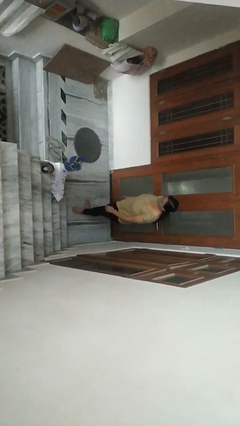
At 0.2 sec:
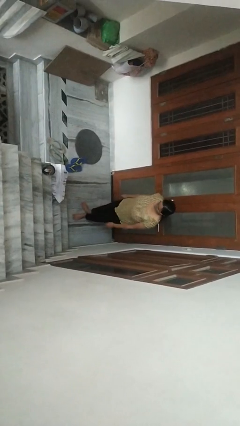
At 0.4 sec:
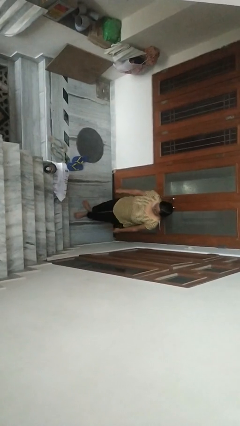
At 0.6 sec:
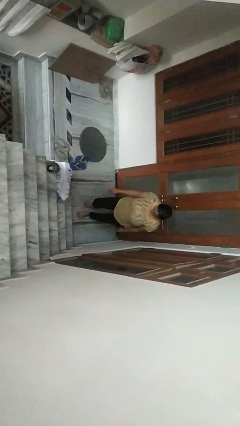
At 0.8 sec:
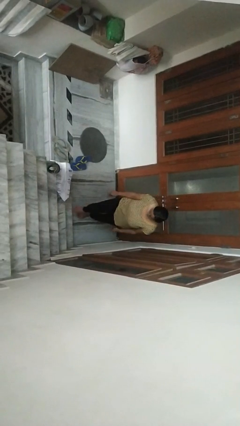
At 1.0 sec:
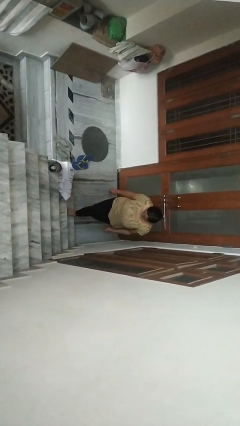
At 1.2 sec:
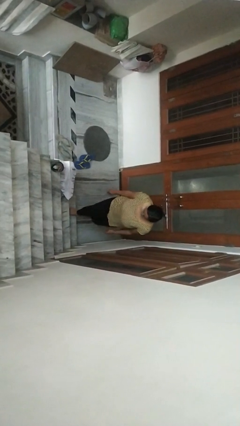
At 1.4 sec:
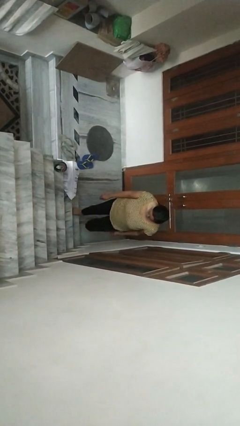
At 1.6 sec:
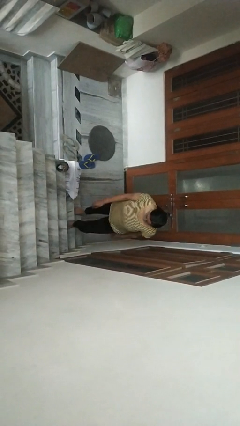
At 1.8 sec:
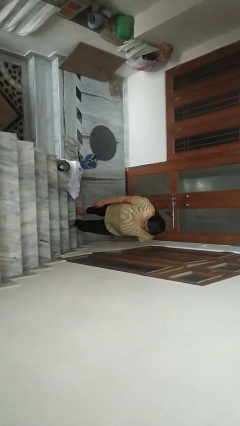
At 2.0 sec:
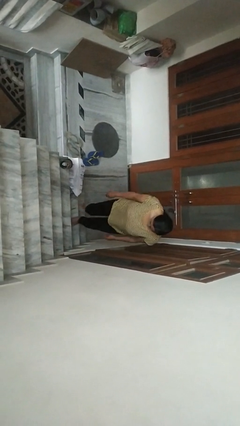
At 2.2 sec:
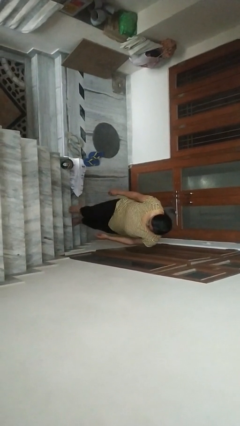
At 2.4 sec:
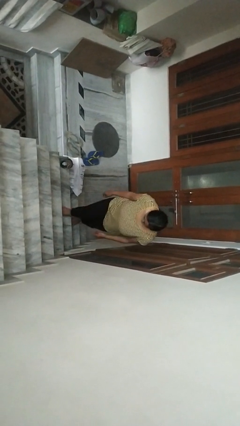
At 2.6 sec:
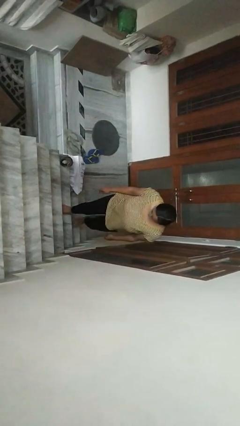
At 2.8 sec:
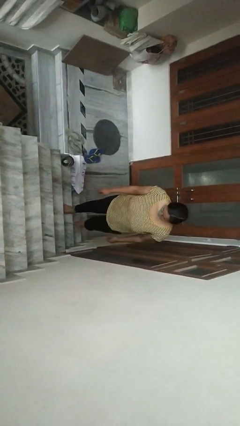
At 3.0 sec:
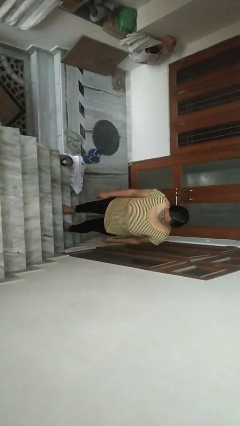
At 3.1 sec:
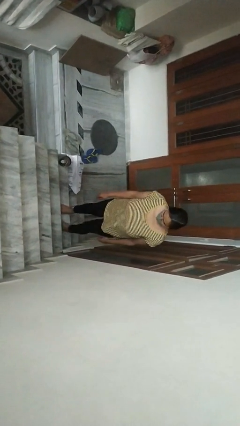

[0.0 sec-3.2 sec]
person climbs up stairs

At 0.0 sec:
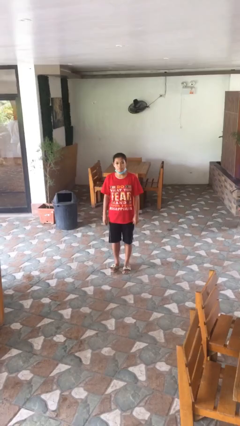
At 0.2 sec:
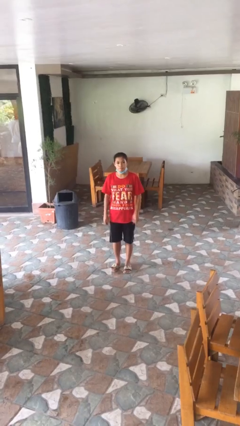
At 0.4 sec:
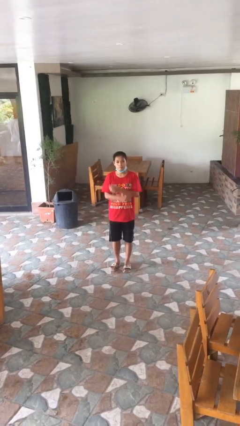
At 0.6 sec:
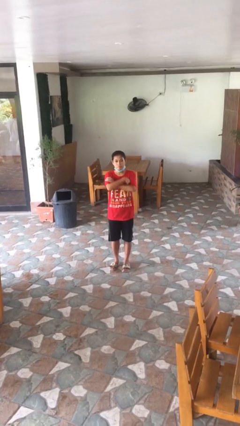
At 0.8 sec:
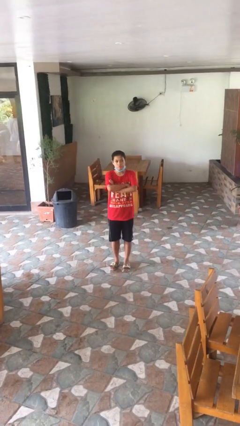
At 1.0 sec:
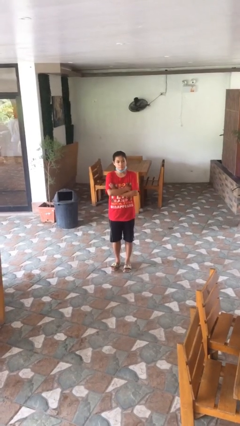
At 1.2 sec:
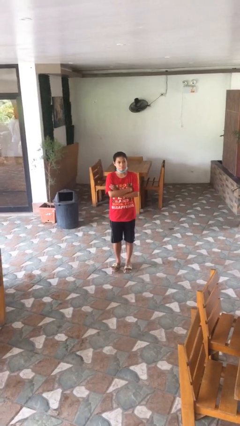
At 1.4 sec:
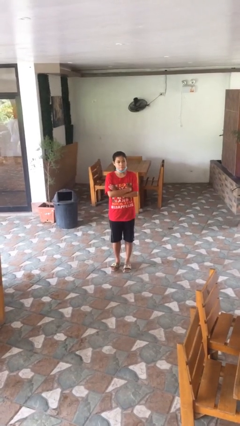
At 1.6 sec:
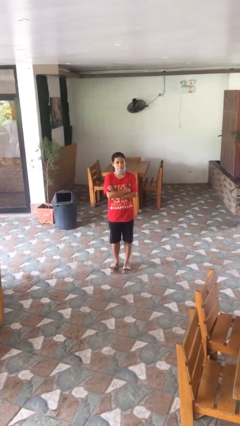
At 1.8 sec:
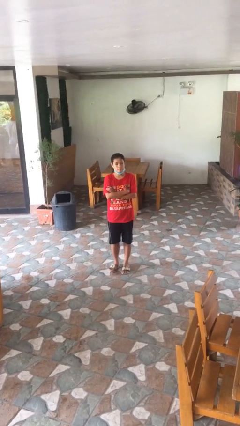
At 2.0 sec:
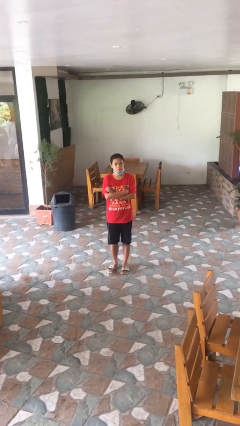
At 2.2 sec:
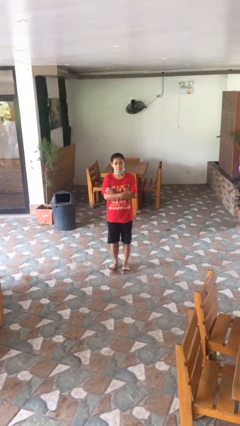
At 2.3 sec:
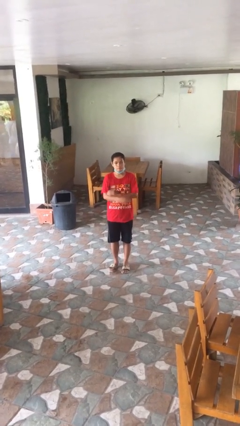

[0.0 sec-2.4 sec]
person crosses arms

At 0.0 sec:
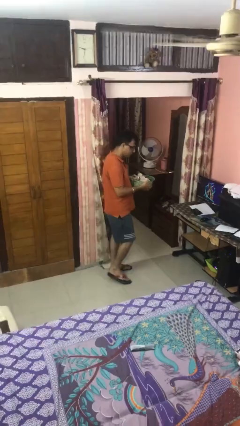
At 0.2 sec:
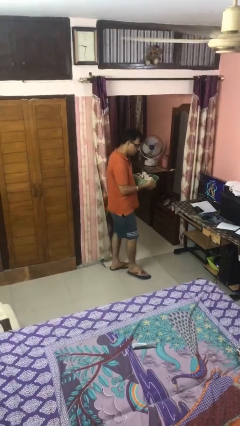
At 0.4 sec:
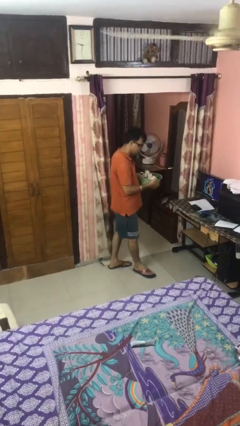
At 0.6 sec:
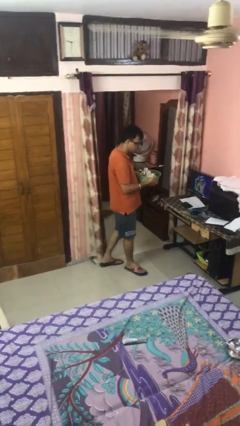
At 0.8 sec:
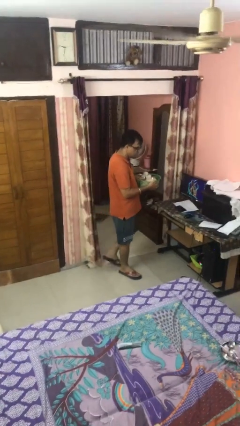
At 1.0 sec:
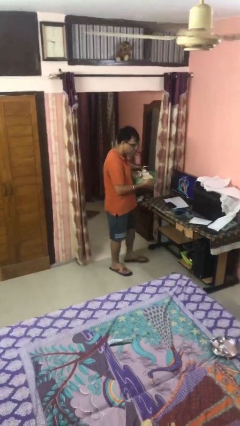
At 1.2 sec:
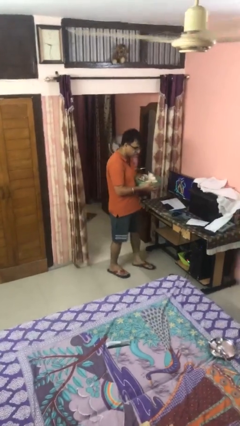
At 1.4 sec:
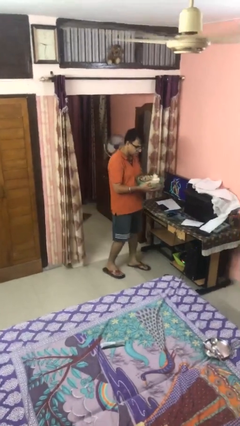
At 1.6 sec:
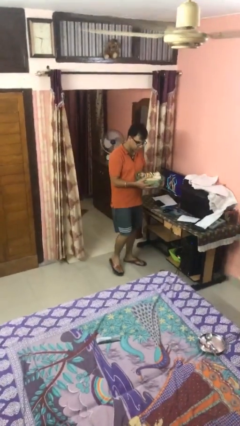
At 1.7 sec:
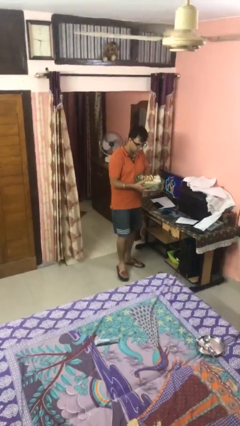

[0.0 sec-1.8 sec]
person carries groceries

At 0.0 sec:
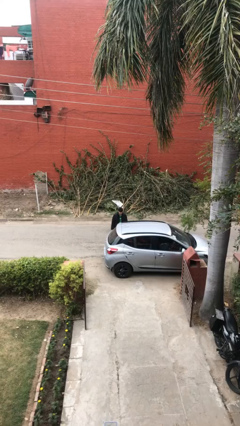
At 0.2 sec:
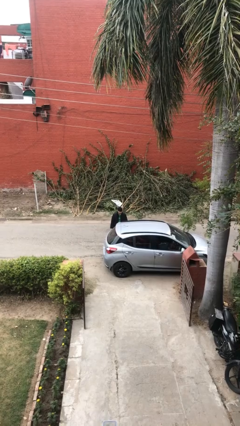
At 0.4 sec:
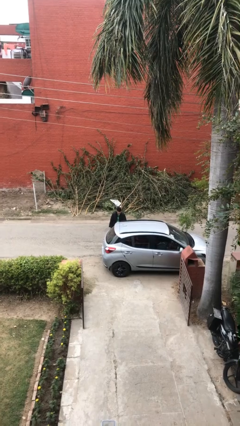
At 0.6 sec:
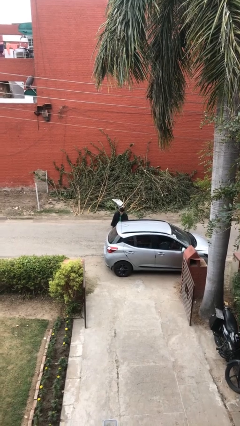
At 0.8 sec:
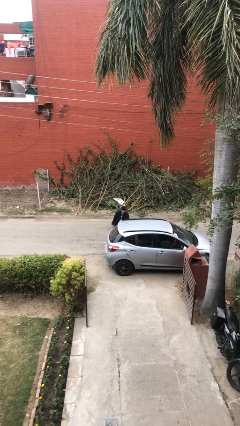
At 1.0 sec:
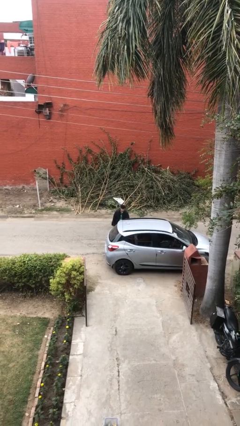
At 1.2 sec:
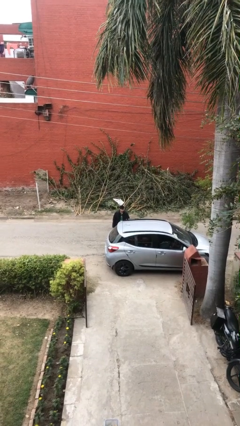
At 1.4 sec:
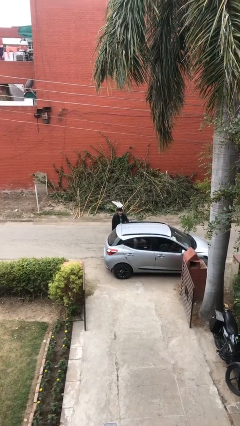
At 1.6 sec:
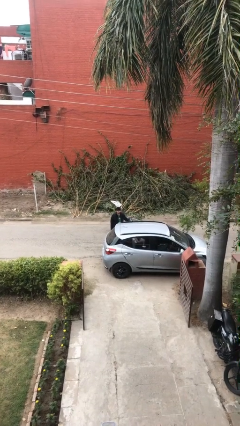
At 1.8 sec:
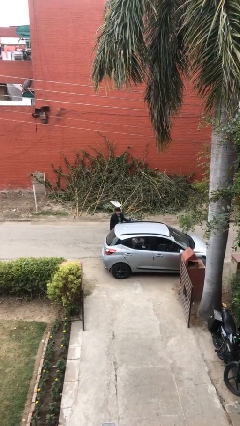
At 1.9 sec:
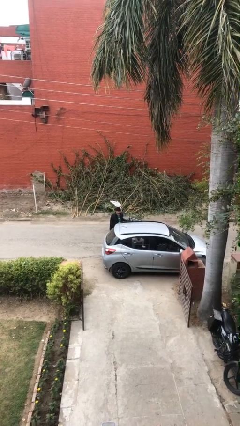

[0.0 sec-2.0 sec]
person opens car door

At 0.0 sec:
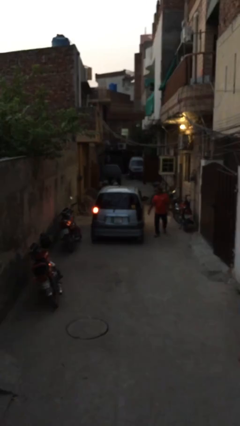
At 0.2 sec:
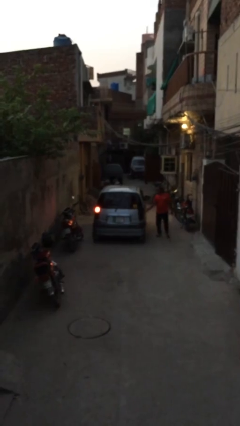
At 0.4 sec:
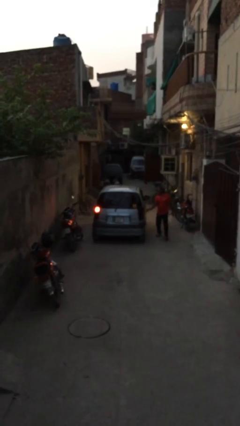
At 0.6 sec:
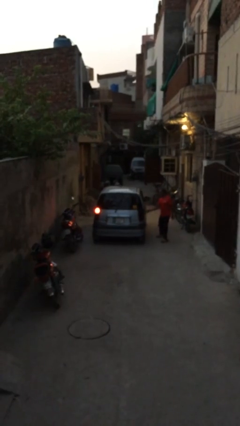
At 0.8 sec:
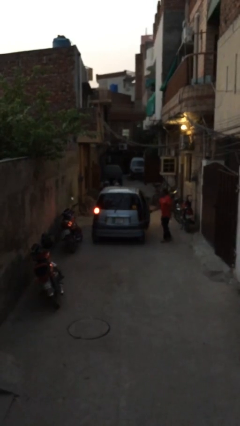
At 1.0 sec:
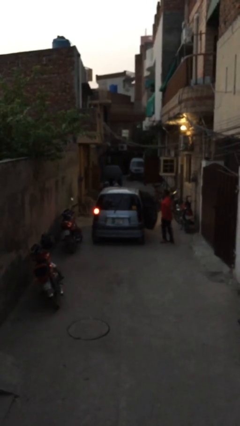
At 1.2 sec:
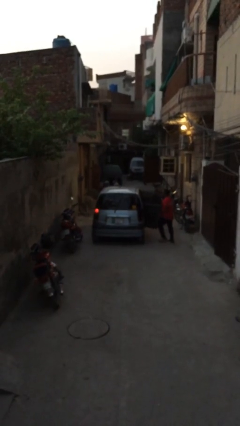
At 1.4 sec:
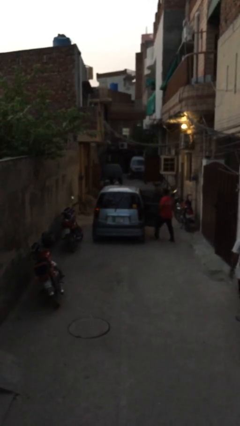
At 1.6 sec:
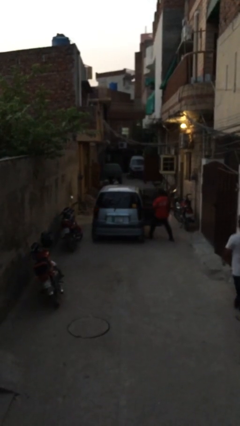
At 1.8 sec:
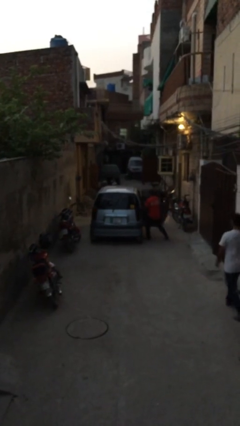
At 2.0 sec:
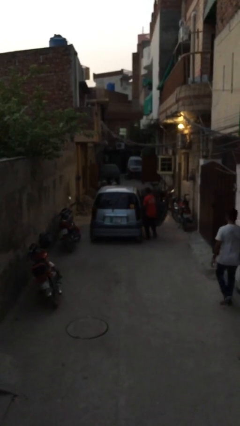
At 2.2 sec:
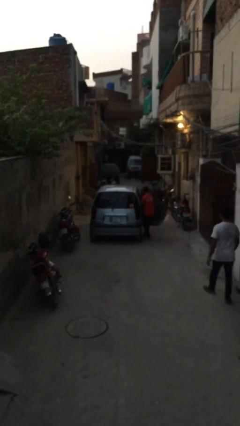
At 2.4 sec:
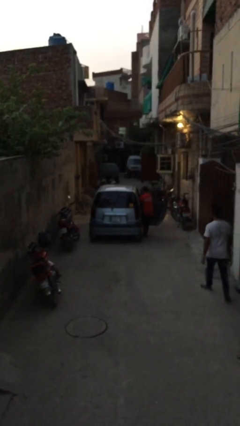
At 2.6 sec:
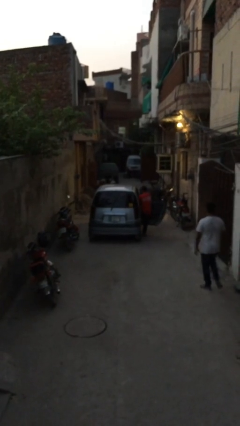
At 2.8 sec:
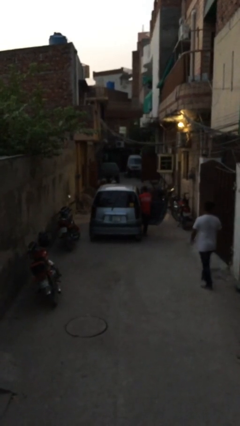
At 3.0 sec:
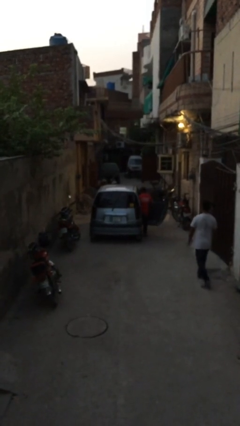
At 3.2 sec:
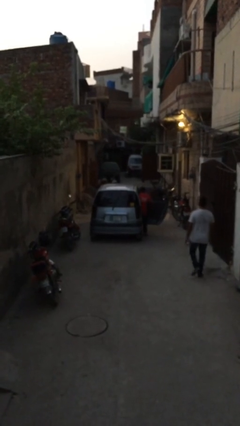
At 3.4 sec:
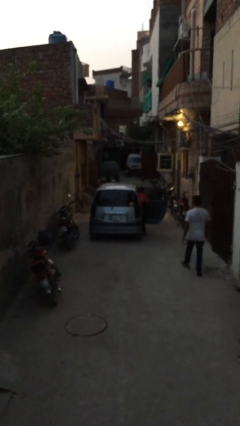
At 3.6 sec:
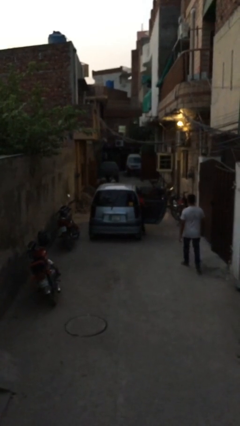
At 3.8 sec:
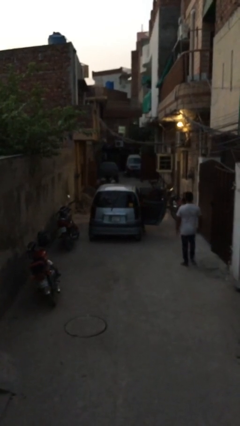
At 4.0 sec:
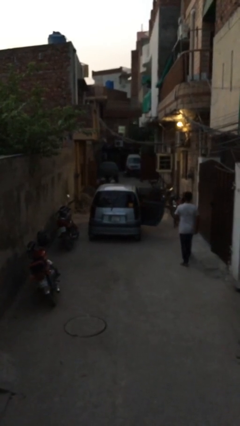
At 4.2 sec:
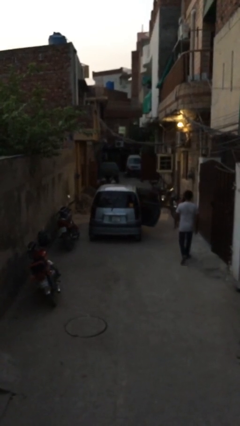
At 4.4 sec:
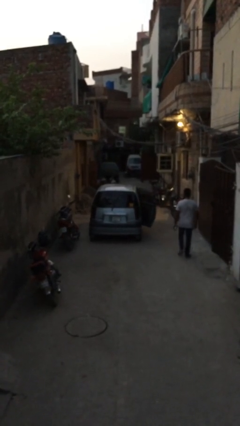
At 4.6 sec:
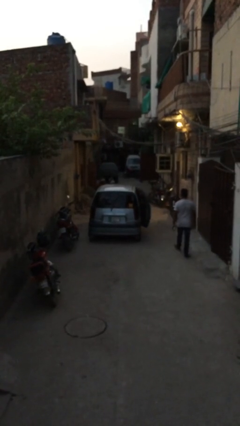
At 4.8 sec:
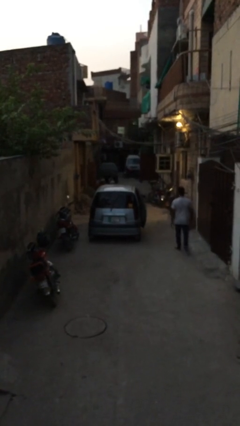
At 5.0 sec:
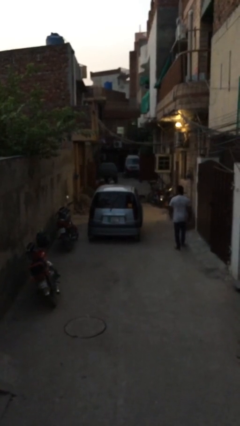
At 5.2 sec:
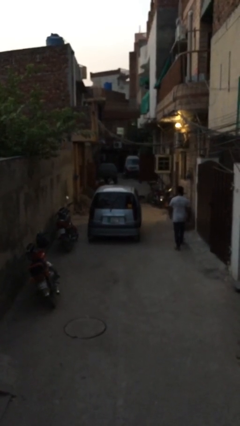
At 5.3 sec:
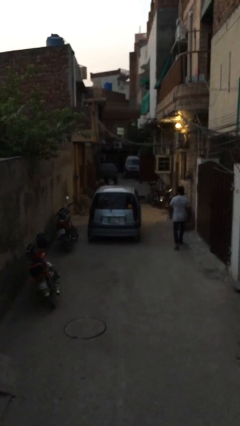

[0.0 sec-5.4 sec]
car picks up person

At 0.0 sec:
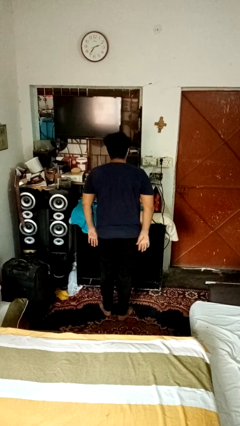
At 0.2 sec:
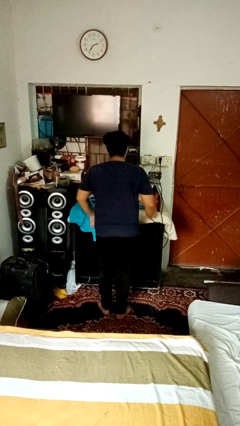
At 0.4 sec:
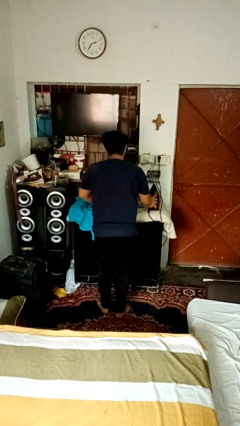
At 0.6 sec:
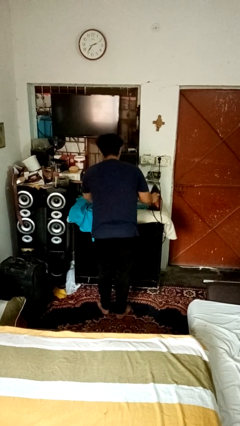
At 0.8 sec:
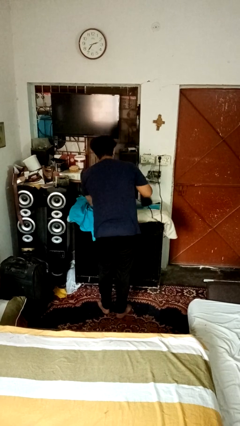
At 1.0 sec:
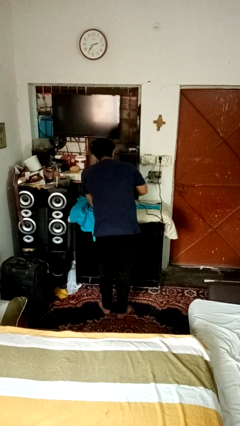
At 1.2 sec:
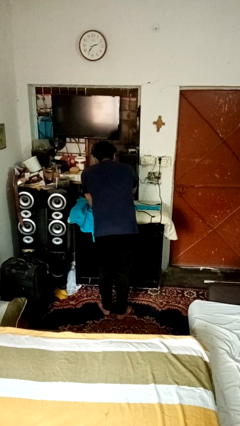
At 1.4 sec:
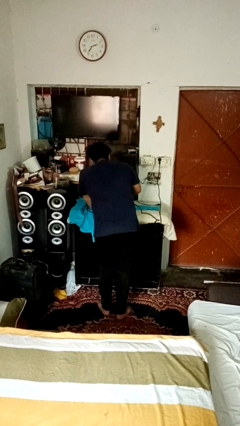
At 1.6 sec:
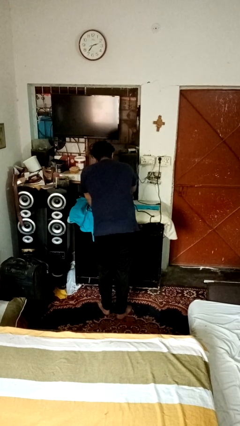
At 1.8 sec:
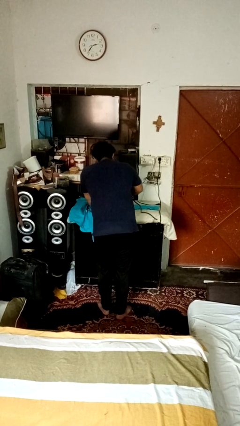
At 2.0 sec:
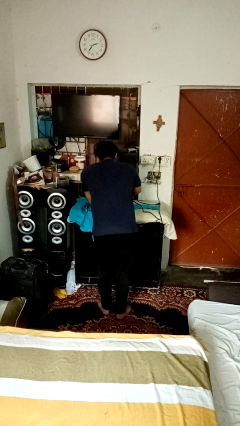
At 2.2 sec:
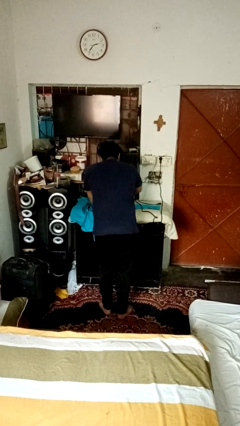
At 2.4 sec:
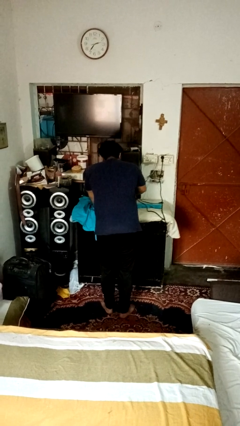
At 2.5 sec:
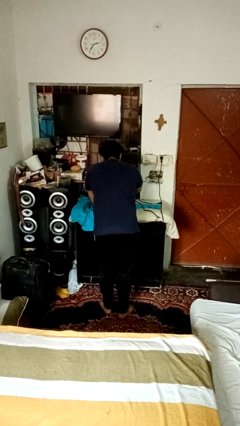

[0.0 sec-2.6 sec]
person irons clothes
